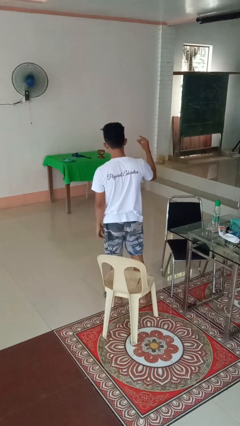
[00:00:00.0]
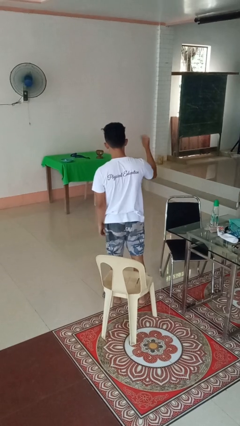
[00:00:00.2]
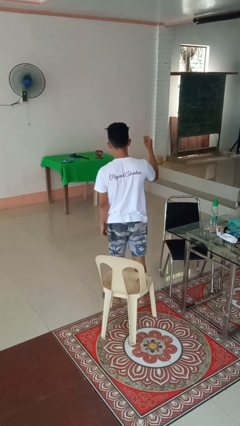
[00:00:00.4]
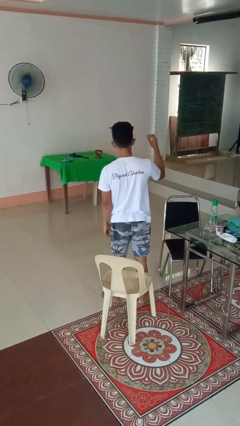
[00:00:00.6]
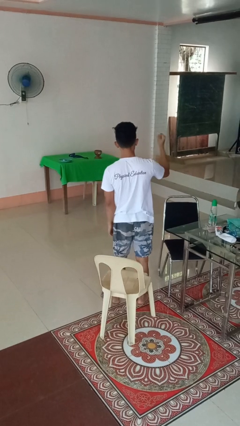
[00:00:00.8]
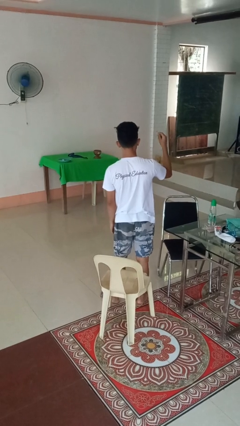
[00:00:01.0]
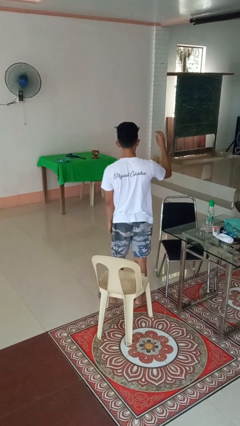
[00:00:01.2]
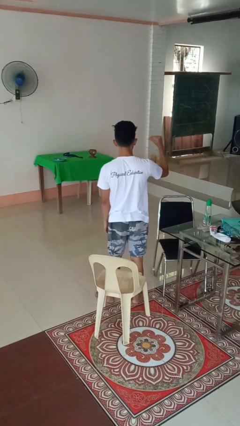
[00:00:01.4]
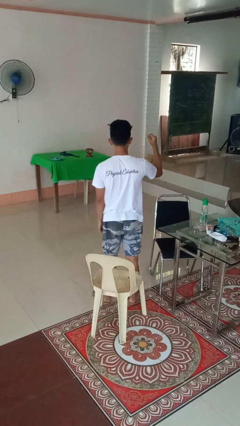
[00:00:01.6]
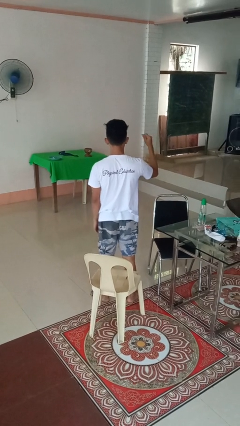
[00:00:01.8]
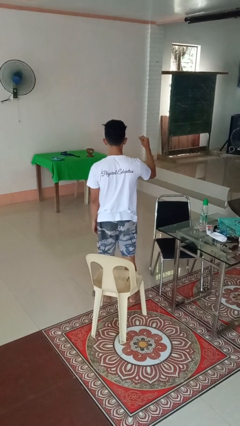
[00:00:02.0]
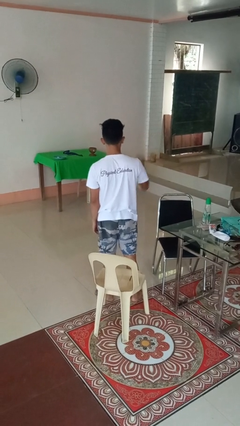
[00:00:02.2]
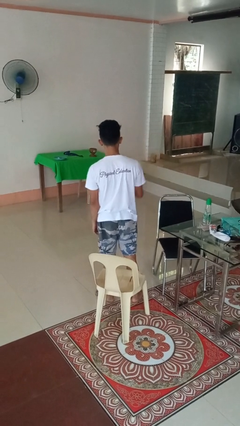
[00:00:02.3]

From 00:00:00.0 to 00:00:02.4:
person snaps fingers

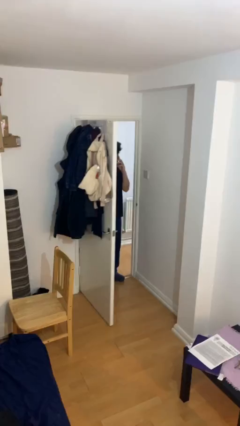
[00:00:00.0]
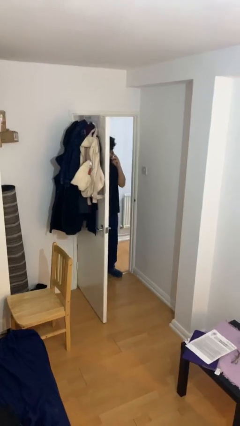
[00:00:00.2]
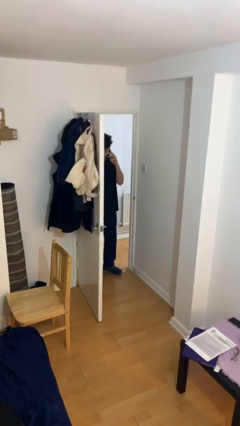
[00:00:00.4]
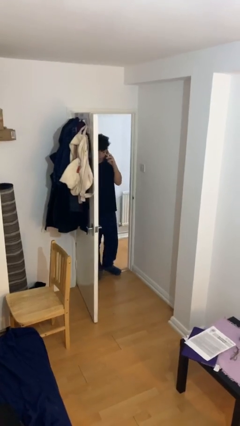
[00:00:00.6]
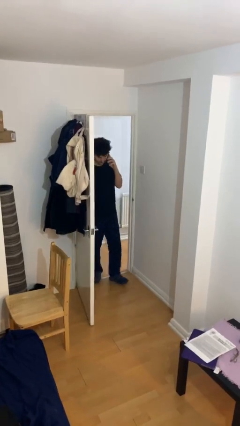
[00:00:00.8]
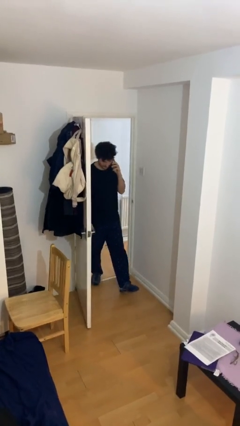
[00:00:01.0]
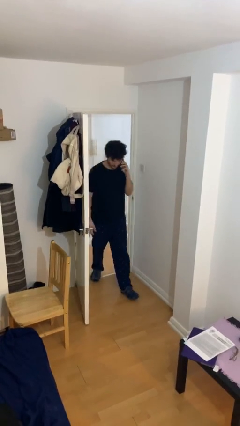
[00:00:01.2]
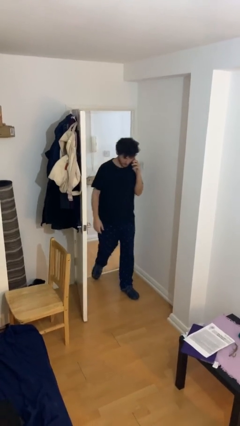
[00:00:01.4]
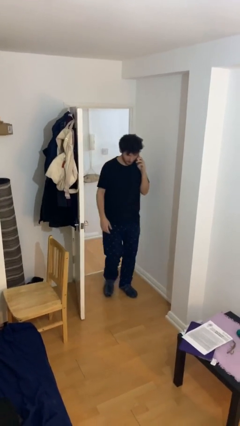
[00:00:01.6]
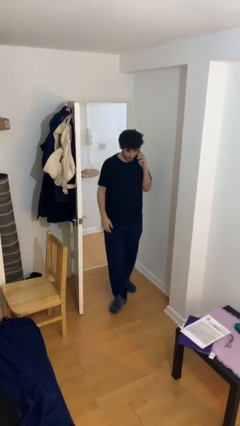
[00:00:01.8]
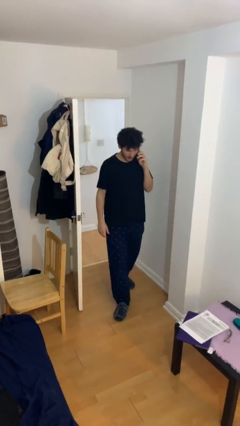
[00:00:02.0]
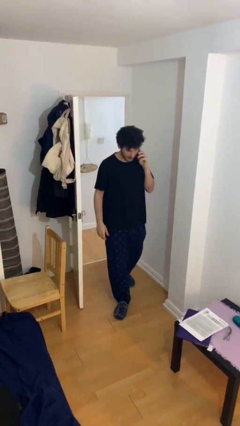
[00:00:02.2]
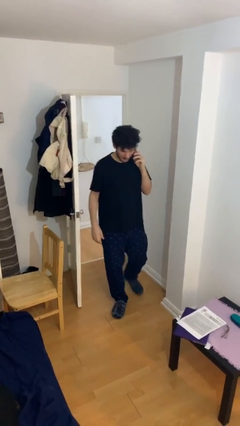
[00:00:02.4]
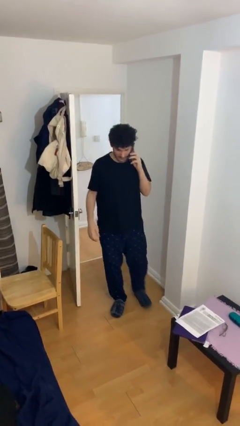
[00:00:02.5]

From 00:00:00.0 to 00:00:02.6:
person enters scene through structure

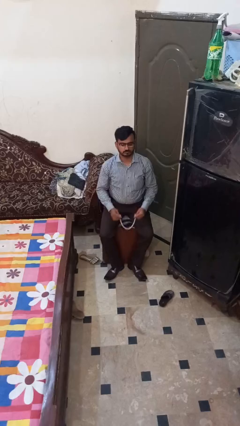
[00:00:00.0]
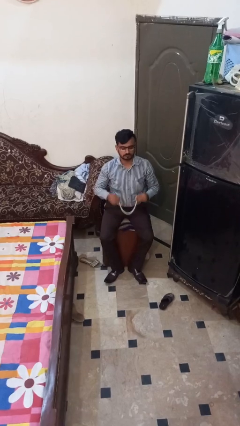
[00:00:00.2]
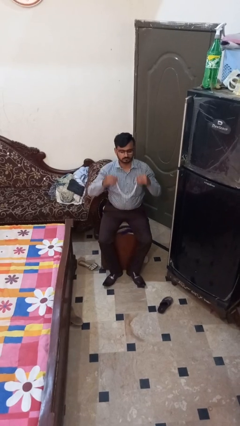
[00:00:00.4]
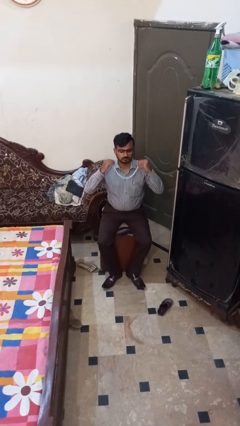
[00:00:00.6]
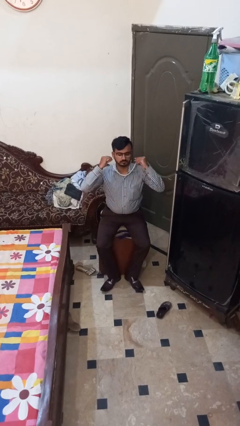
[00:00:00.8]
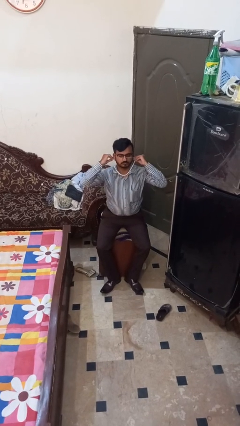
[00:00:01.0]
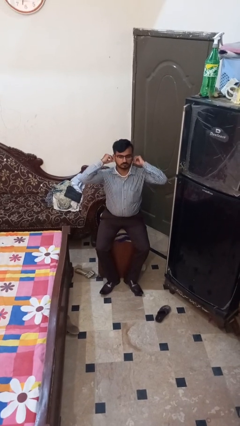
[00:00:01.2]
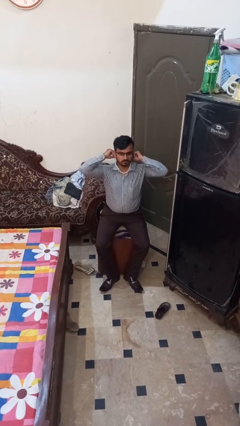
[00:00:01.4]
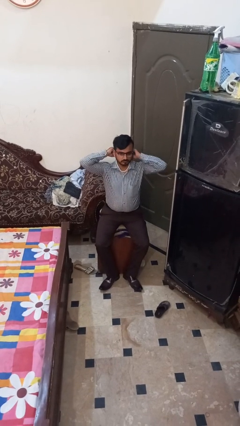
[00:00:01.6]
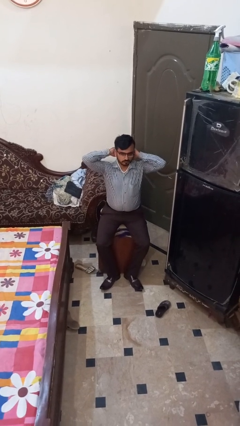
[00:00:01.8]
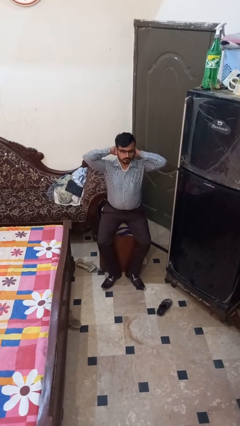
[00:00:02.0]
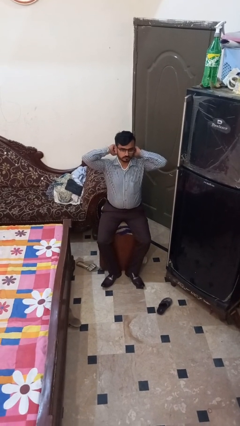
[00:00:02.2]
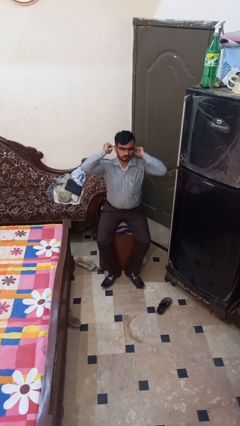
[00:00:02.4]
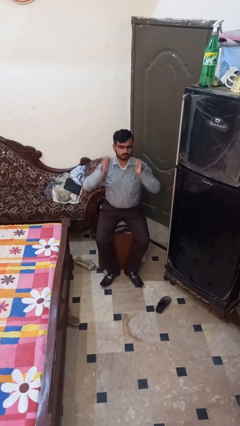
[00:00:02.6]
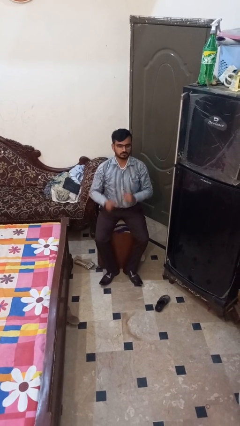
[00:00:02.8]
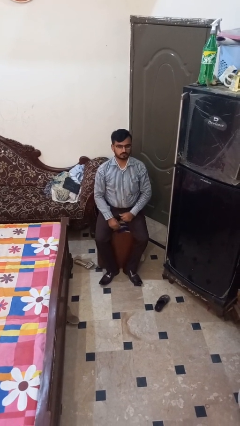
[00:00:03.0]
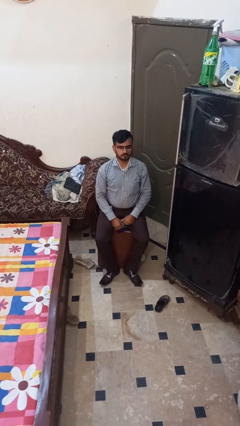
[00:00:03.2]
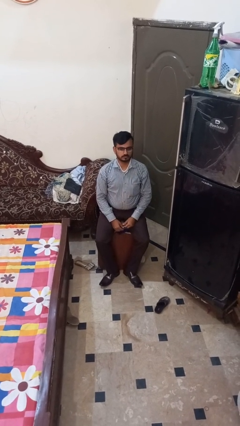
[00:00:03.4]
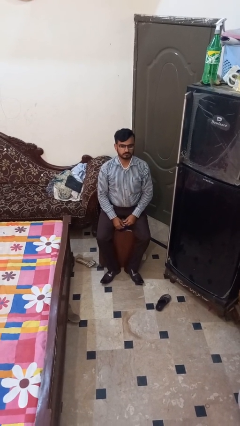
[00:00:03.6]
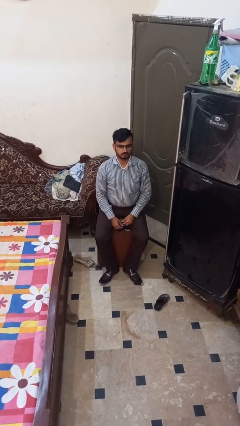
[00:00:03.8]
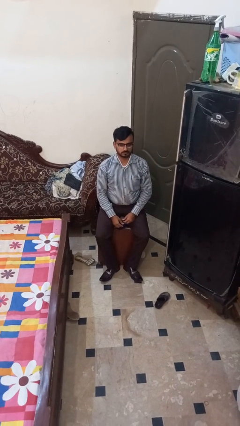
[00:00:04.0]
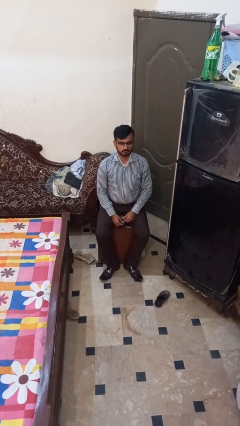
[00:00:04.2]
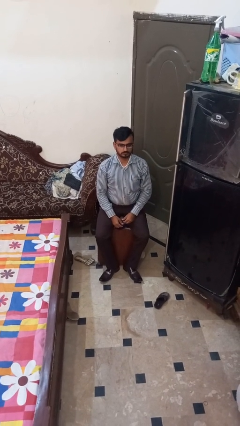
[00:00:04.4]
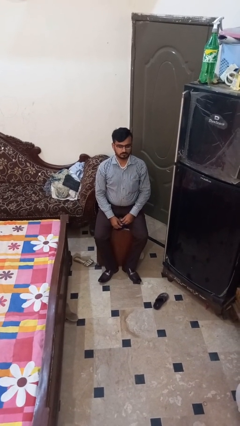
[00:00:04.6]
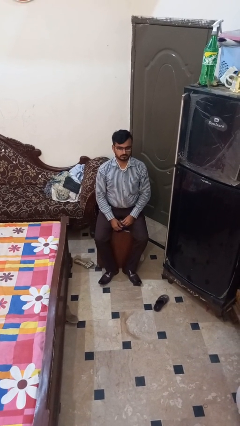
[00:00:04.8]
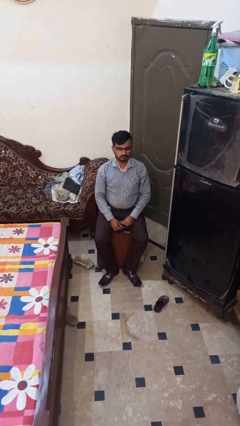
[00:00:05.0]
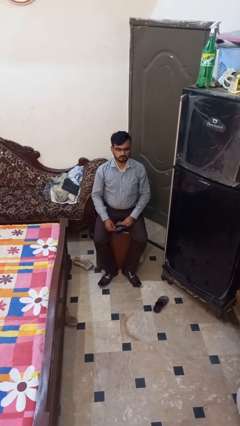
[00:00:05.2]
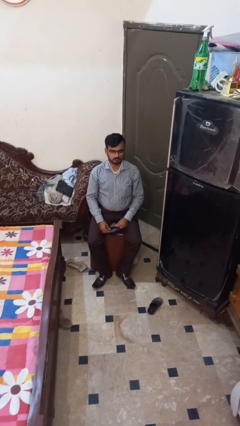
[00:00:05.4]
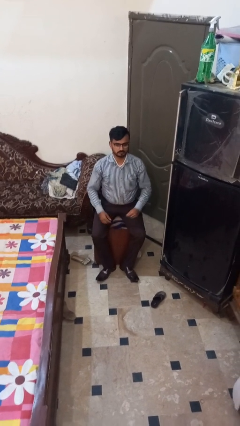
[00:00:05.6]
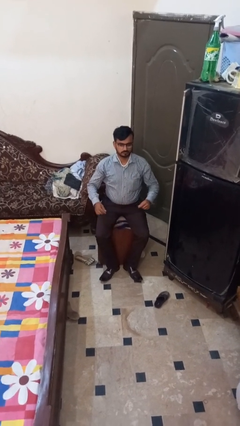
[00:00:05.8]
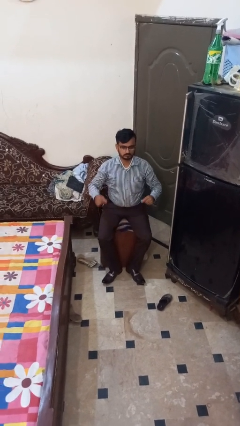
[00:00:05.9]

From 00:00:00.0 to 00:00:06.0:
person puts on necklace

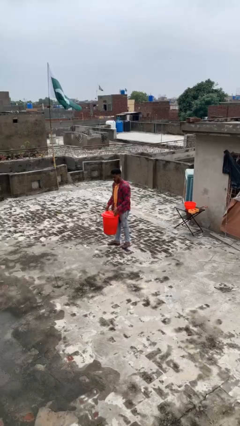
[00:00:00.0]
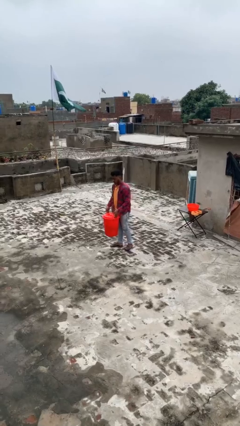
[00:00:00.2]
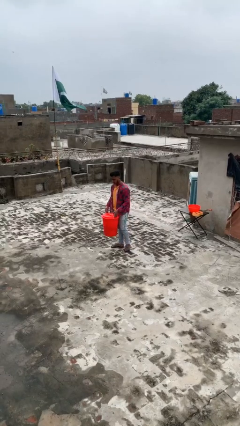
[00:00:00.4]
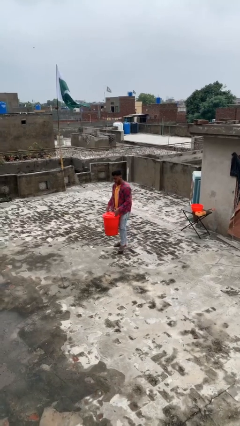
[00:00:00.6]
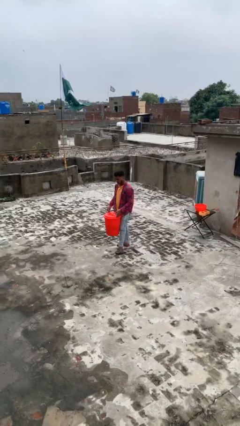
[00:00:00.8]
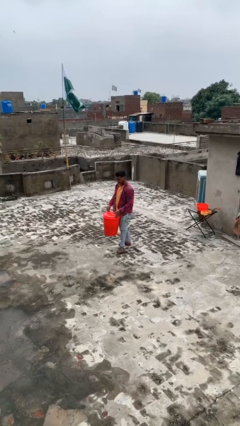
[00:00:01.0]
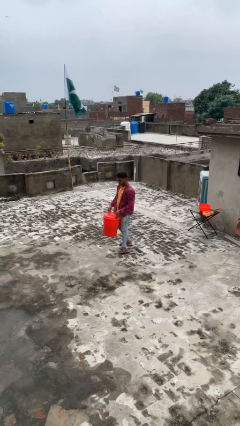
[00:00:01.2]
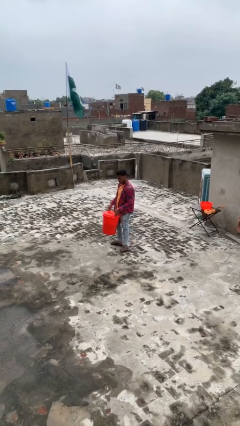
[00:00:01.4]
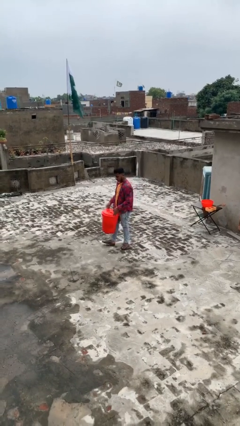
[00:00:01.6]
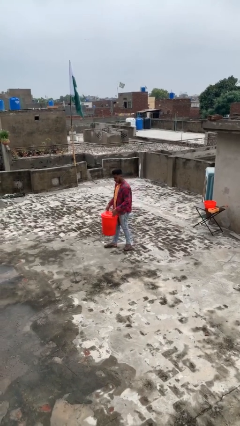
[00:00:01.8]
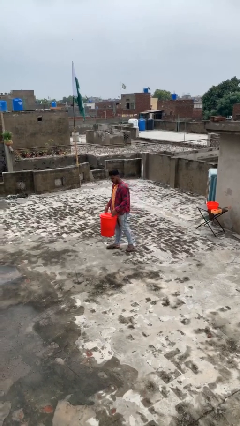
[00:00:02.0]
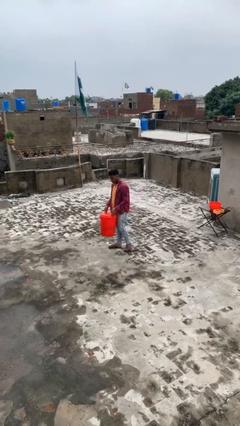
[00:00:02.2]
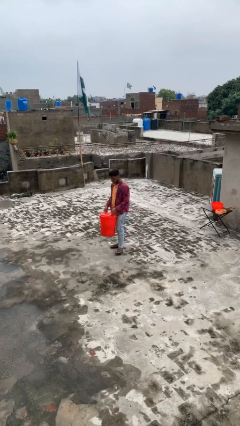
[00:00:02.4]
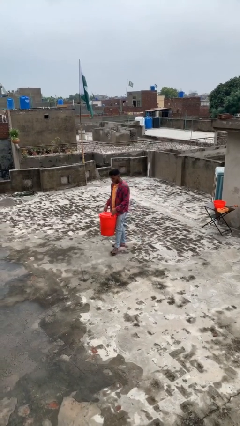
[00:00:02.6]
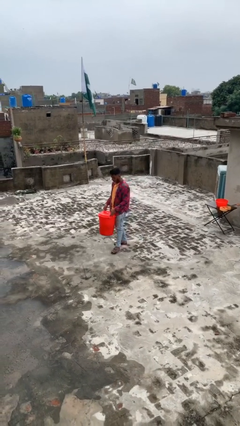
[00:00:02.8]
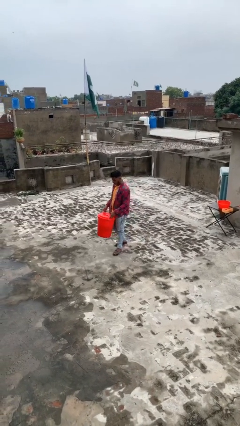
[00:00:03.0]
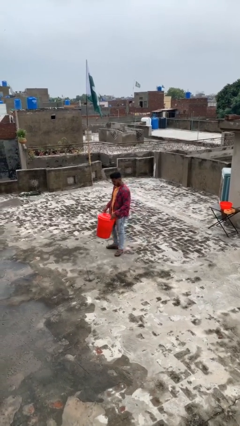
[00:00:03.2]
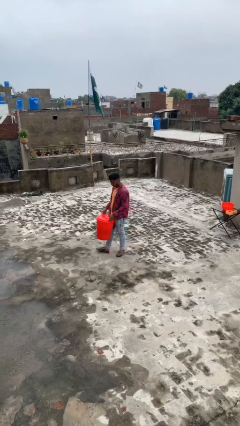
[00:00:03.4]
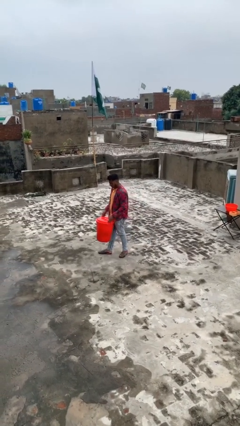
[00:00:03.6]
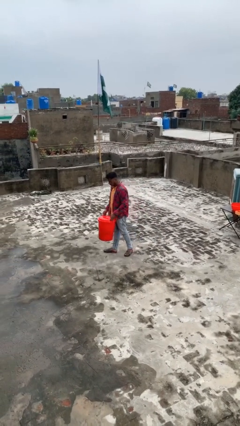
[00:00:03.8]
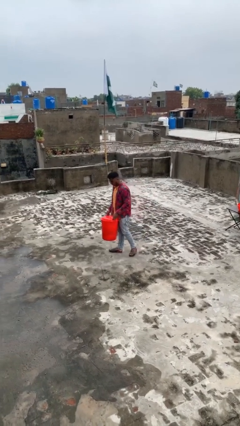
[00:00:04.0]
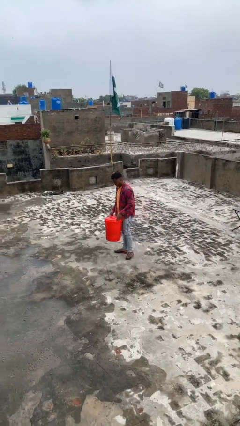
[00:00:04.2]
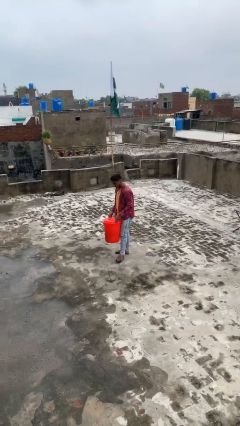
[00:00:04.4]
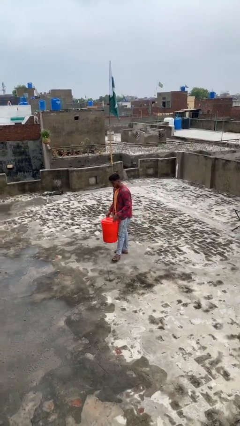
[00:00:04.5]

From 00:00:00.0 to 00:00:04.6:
person carries heavy object

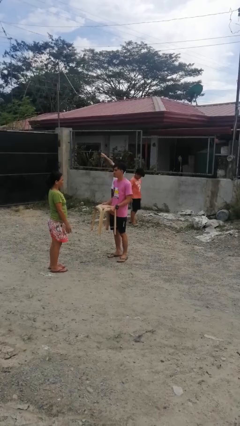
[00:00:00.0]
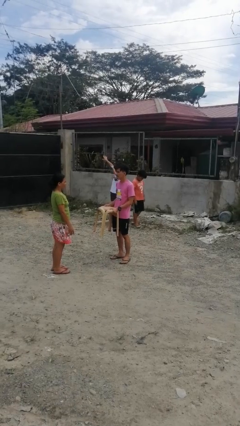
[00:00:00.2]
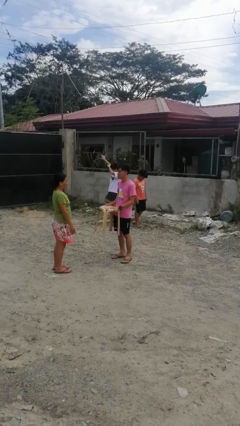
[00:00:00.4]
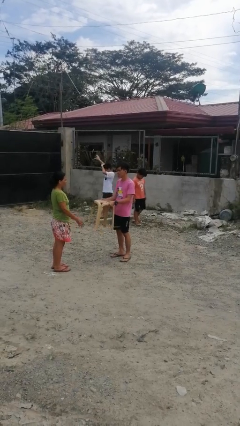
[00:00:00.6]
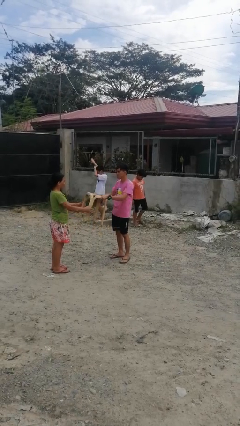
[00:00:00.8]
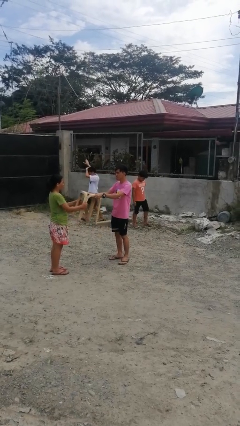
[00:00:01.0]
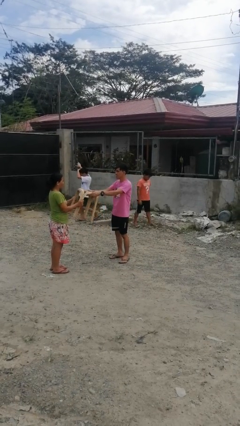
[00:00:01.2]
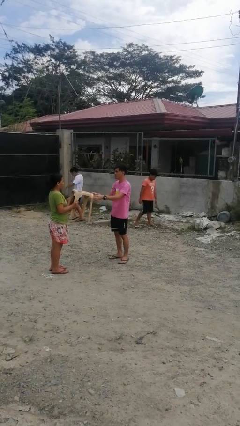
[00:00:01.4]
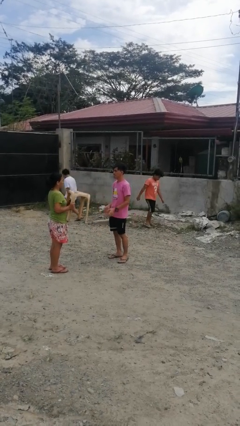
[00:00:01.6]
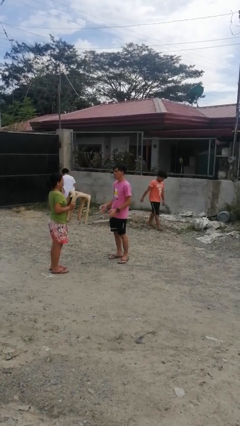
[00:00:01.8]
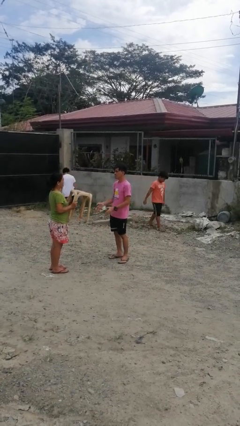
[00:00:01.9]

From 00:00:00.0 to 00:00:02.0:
person transfers object to person
